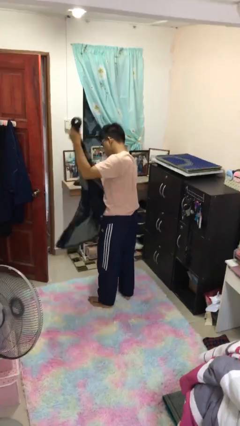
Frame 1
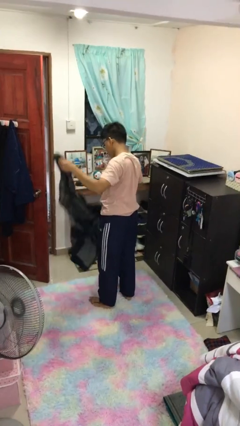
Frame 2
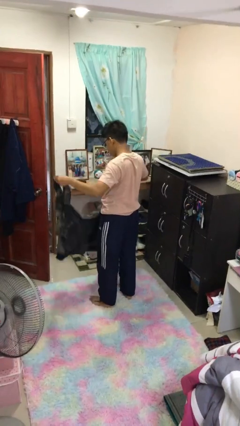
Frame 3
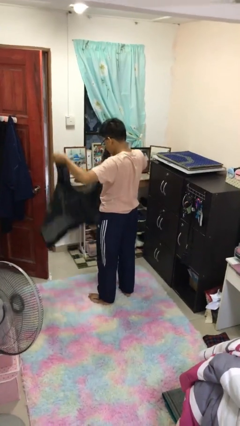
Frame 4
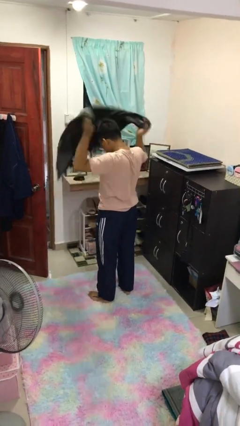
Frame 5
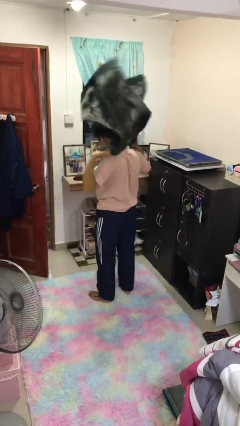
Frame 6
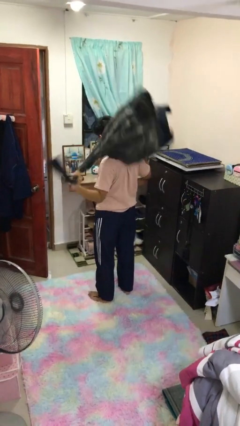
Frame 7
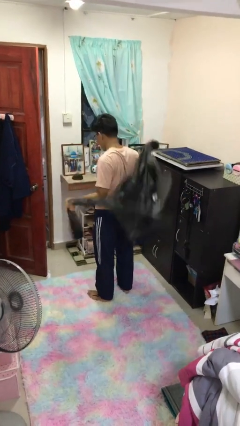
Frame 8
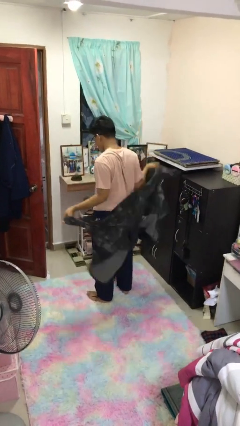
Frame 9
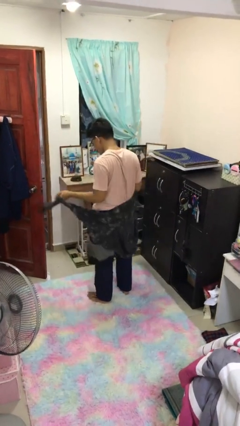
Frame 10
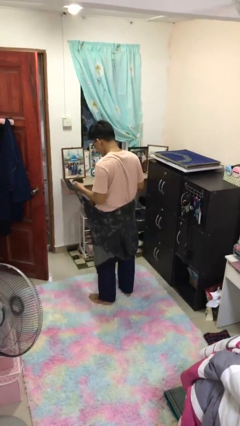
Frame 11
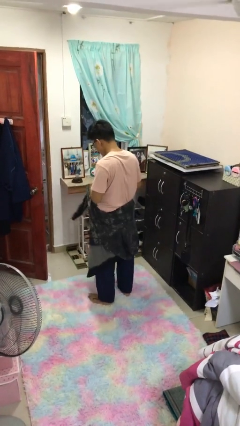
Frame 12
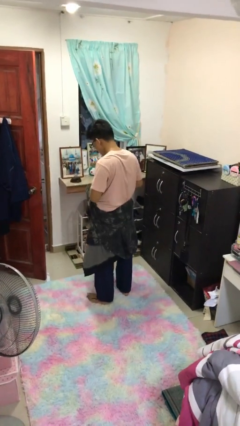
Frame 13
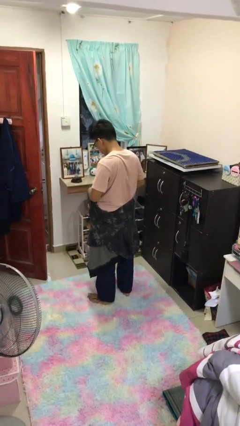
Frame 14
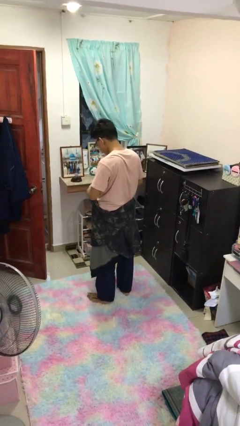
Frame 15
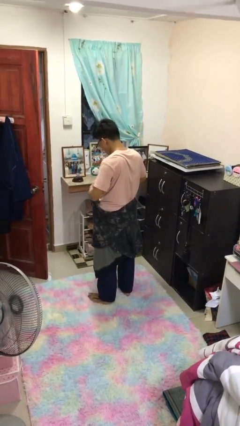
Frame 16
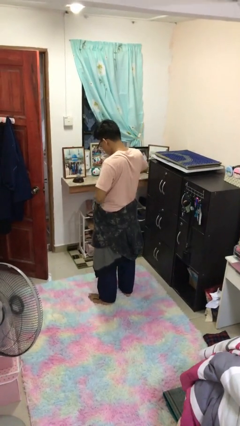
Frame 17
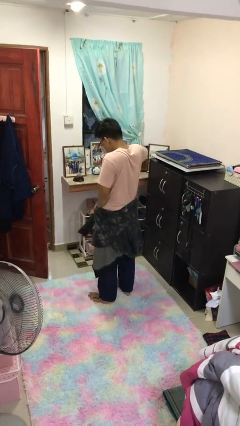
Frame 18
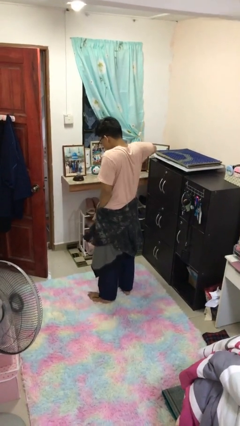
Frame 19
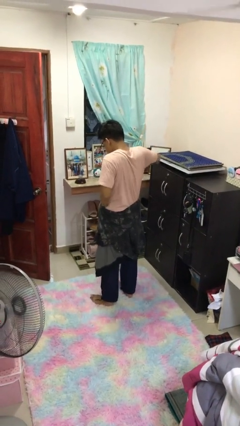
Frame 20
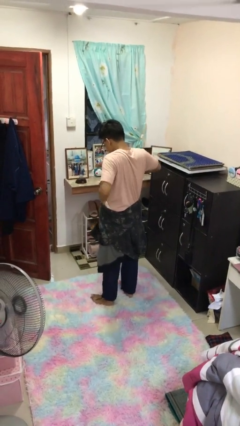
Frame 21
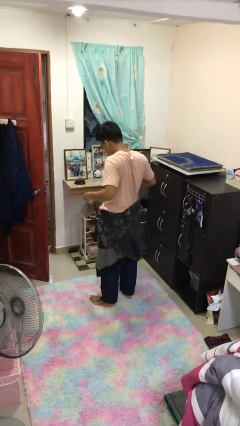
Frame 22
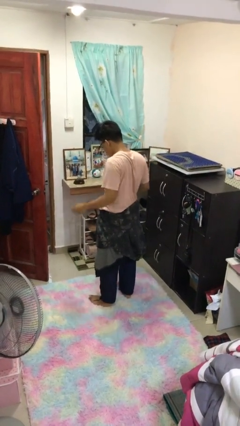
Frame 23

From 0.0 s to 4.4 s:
person ties jacket around waist

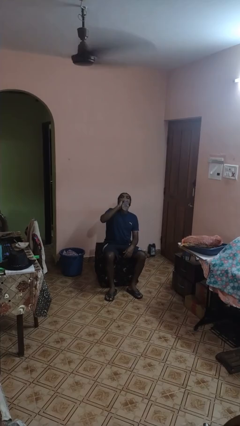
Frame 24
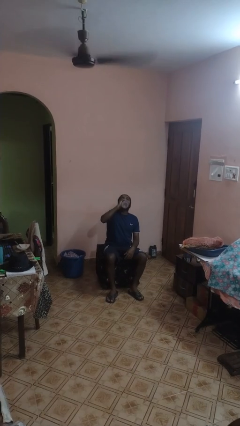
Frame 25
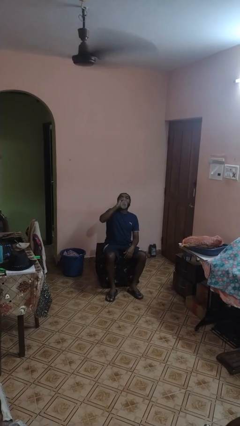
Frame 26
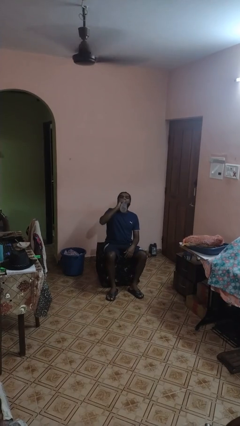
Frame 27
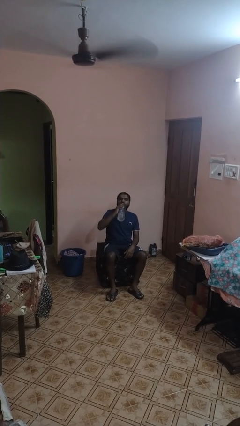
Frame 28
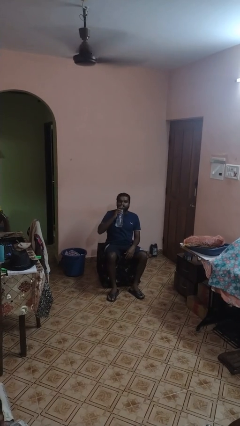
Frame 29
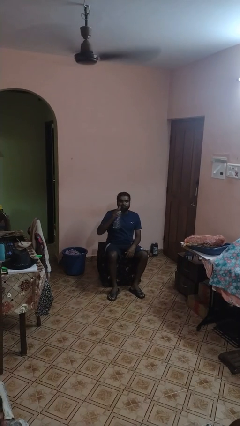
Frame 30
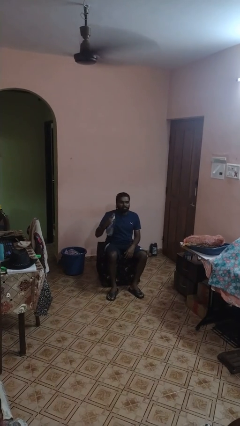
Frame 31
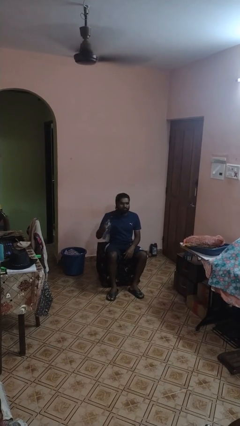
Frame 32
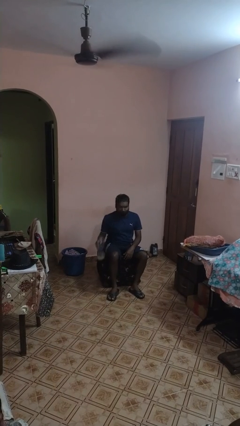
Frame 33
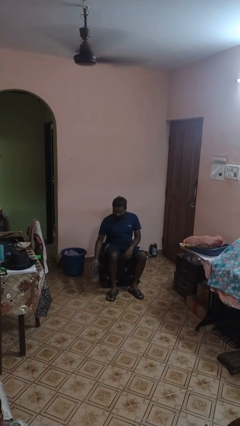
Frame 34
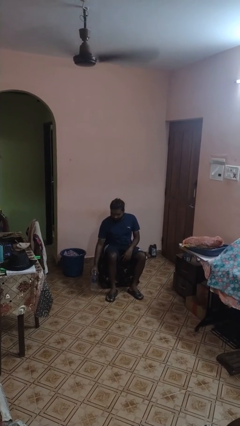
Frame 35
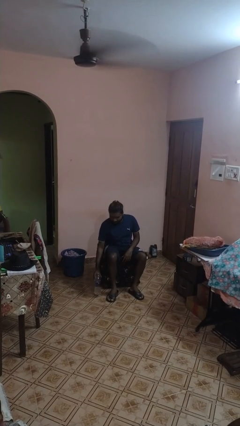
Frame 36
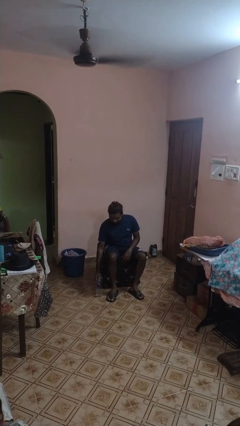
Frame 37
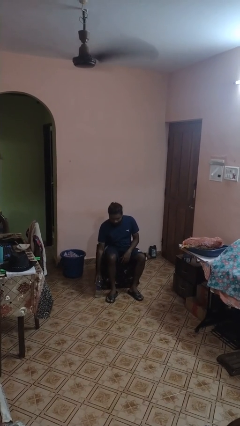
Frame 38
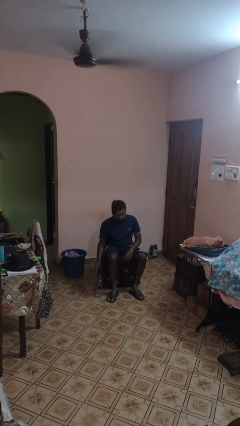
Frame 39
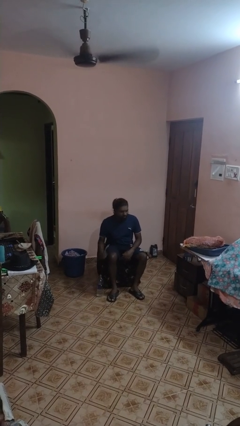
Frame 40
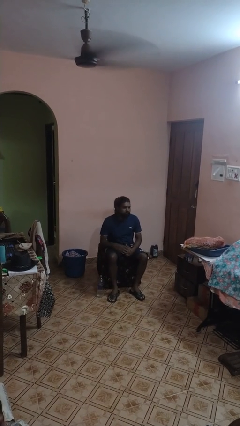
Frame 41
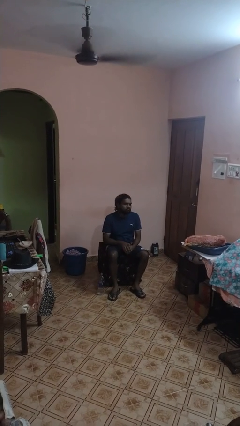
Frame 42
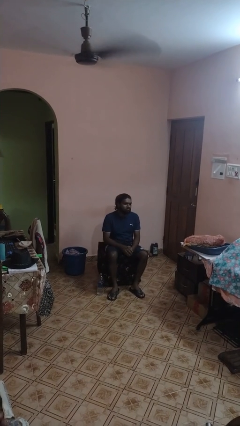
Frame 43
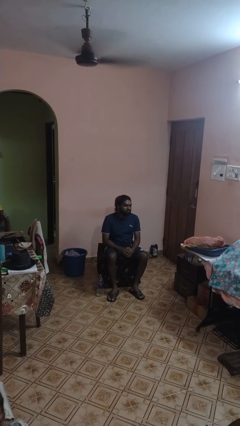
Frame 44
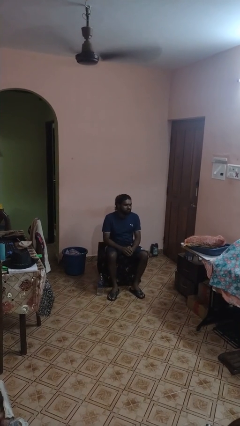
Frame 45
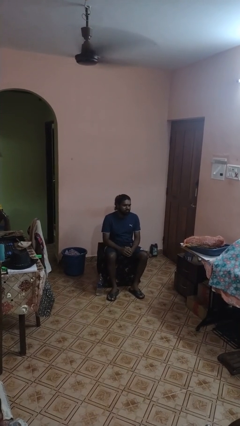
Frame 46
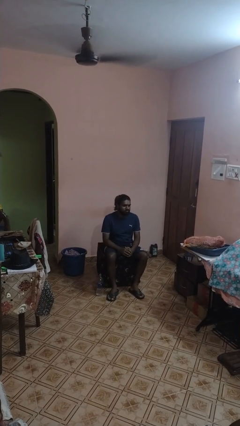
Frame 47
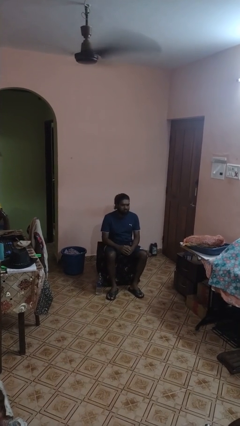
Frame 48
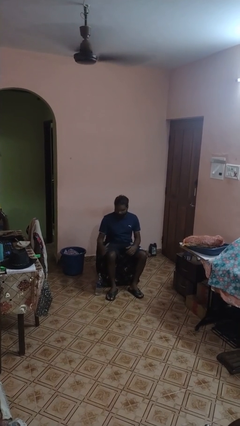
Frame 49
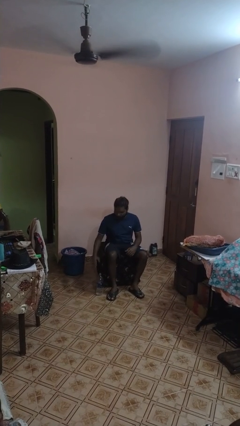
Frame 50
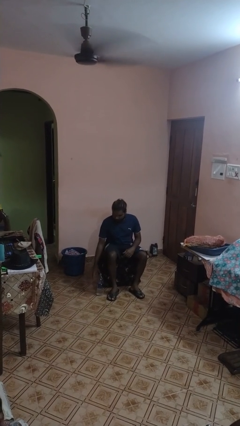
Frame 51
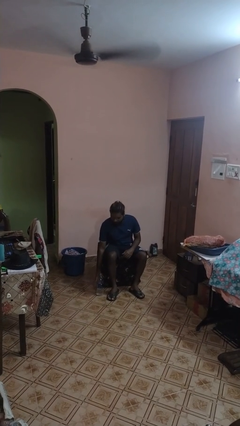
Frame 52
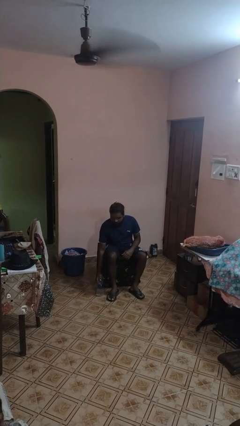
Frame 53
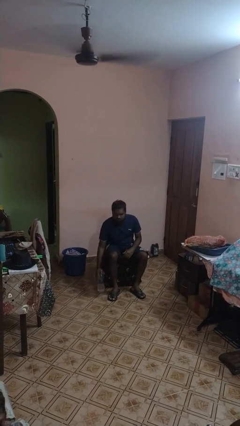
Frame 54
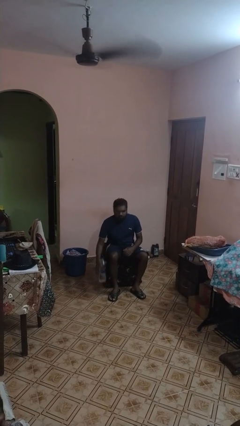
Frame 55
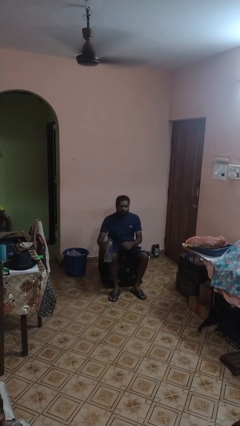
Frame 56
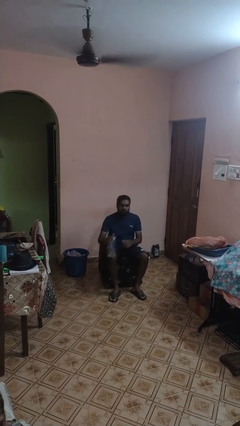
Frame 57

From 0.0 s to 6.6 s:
person drinks from bottle

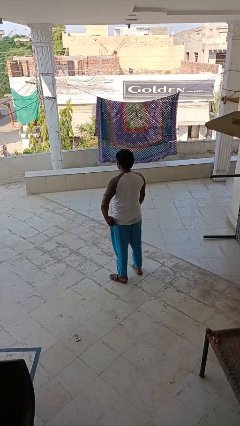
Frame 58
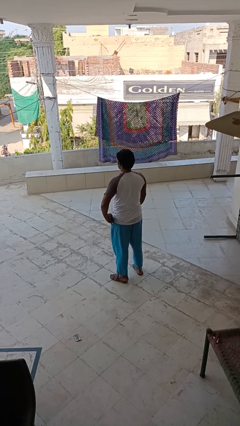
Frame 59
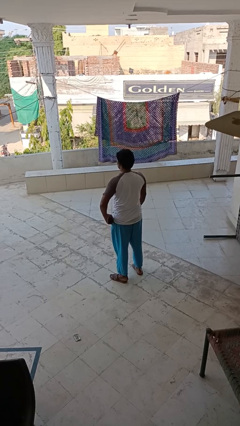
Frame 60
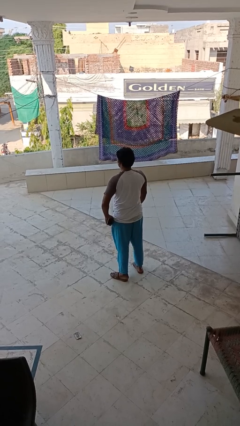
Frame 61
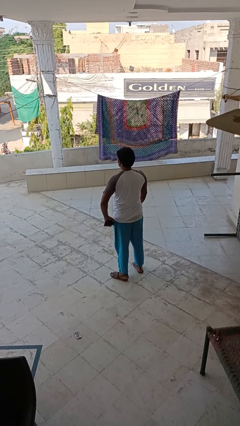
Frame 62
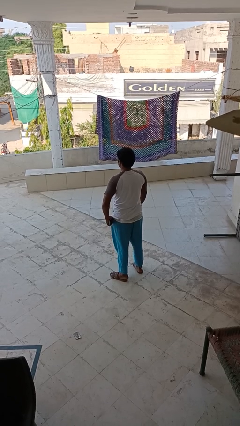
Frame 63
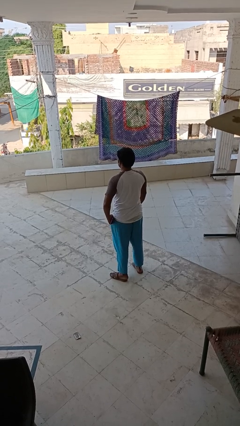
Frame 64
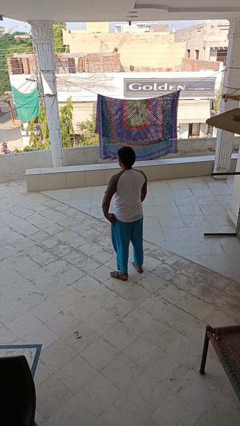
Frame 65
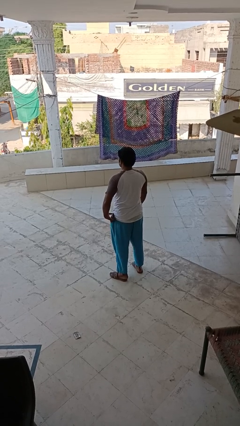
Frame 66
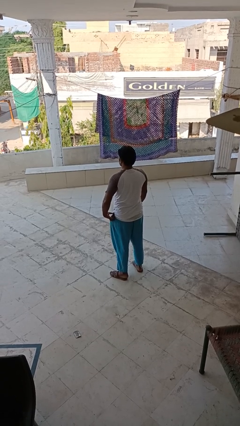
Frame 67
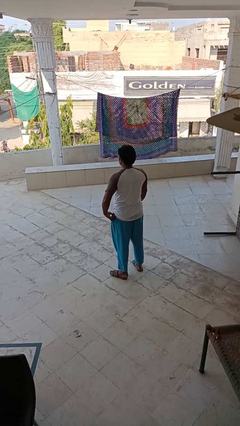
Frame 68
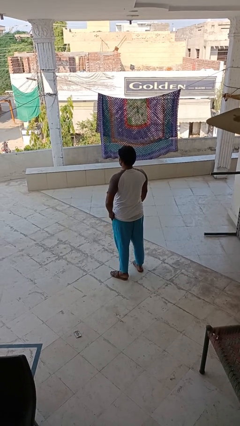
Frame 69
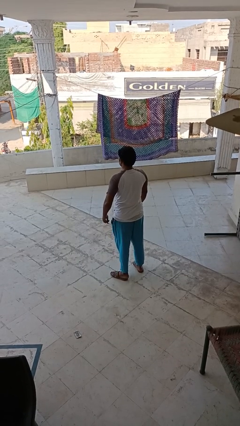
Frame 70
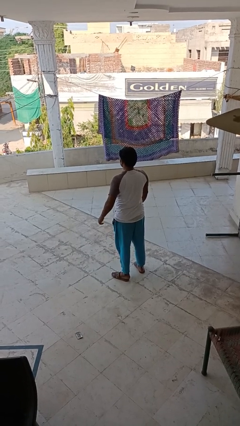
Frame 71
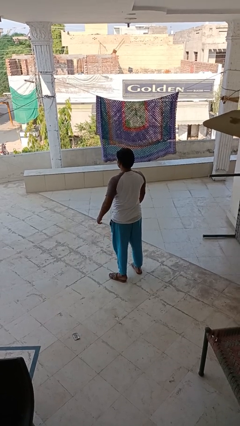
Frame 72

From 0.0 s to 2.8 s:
person puts phone into pocket

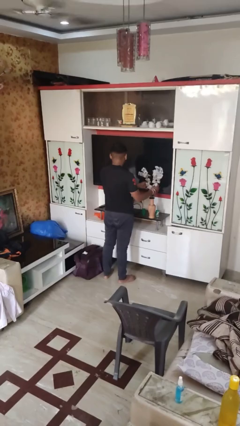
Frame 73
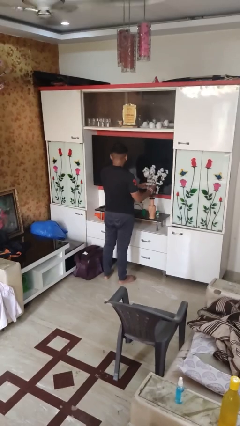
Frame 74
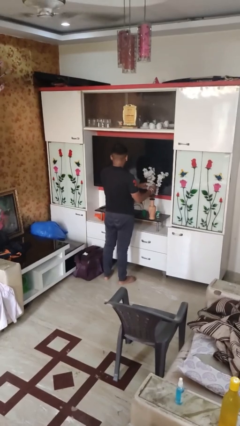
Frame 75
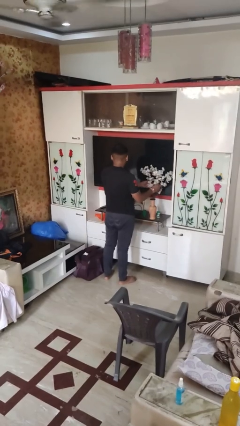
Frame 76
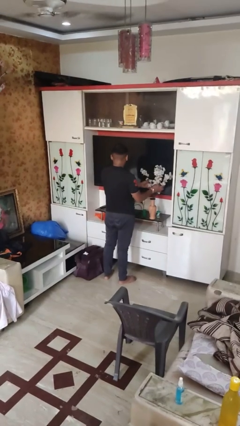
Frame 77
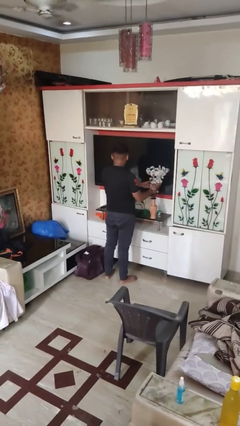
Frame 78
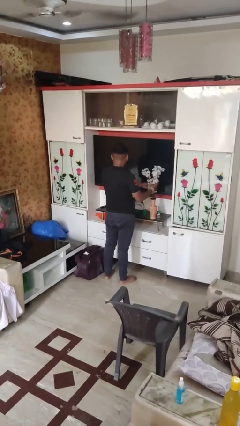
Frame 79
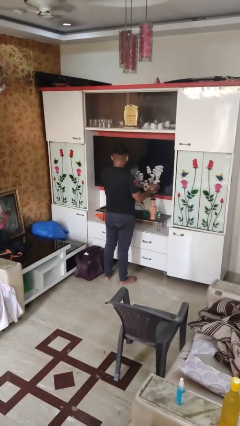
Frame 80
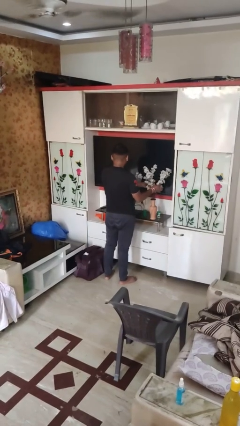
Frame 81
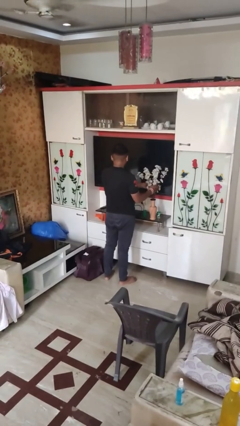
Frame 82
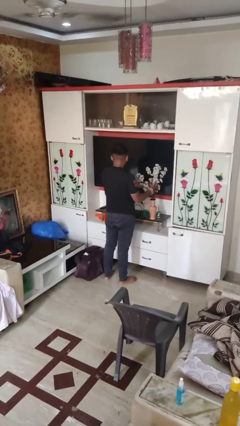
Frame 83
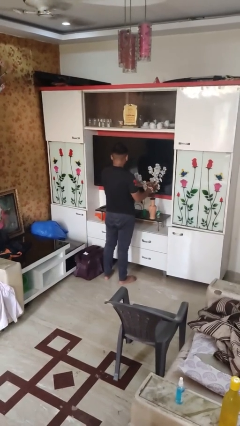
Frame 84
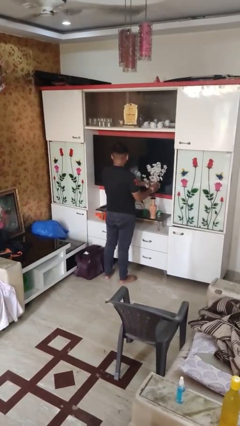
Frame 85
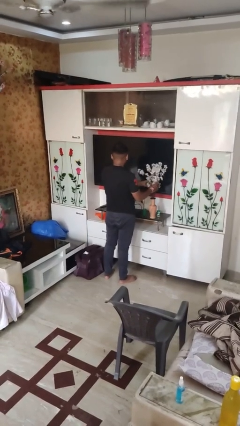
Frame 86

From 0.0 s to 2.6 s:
person arranges flowers in vase

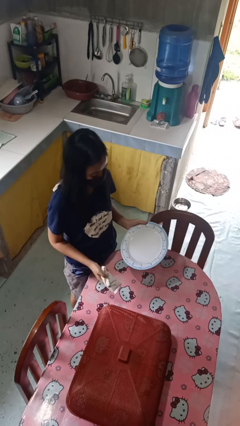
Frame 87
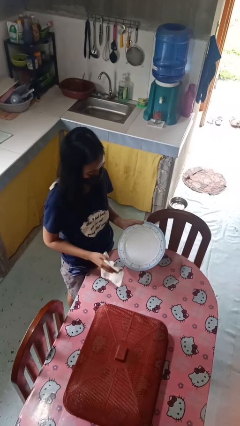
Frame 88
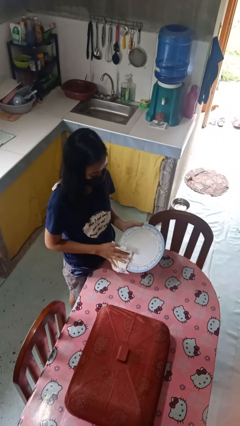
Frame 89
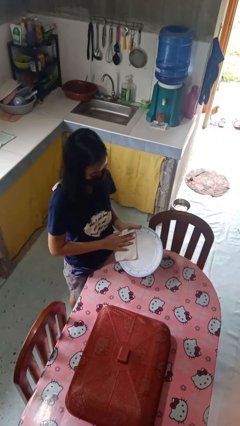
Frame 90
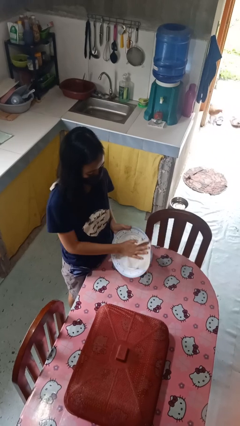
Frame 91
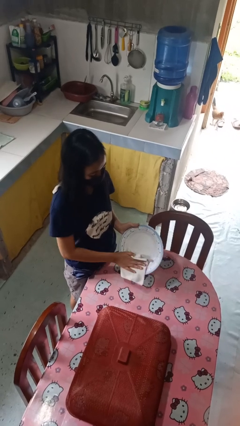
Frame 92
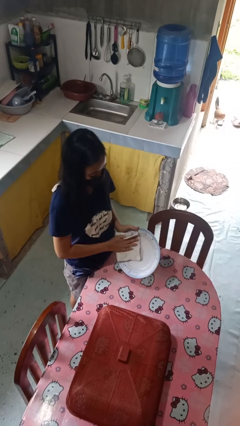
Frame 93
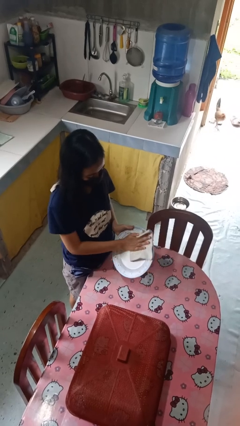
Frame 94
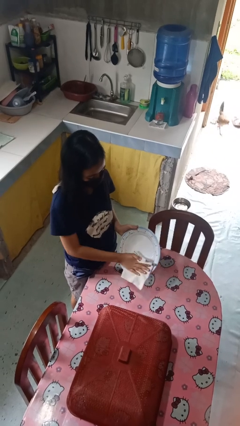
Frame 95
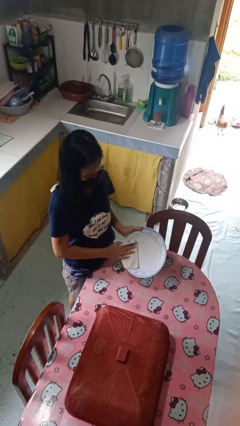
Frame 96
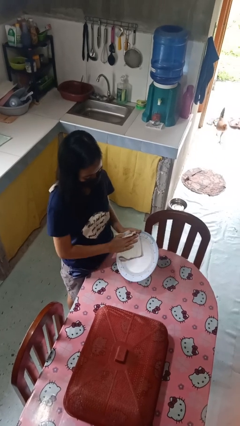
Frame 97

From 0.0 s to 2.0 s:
person dries dish
